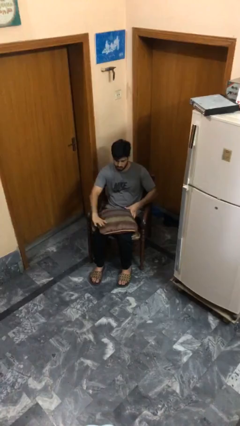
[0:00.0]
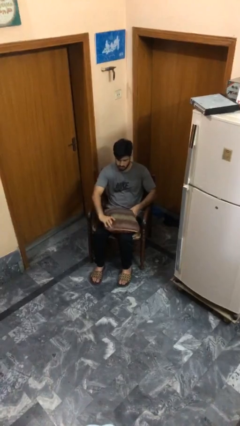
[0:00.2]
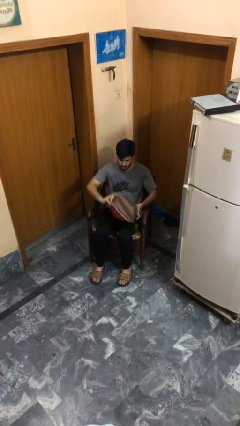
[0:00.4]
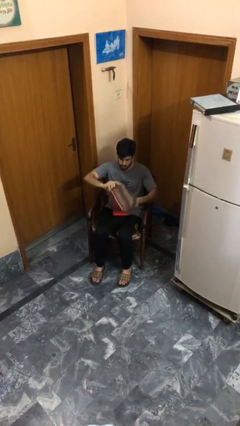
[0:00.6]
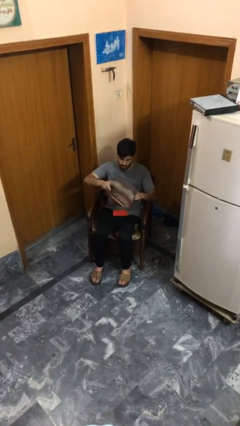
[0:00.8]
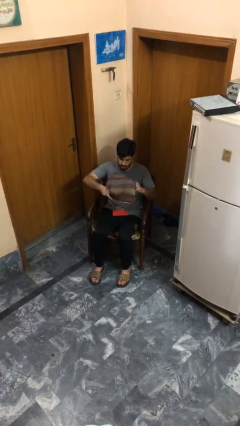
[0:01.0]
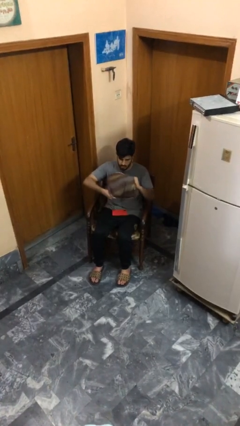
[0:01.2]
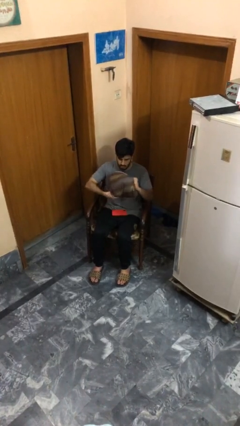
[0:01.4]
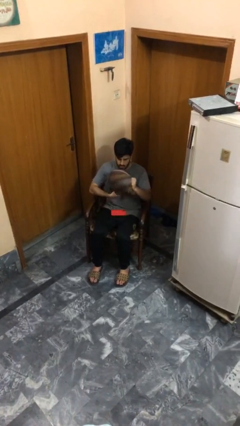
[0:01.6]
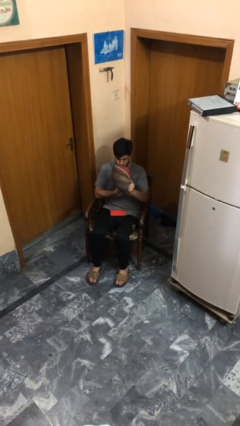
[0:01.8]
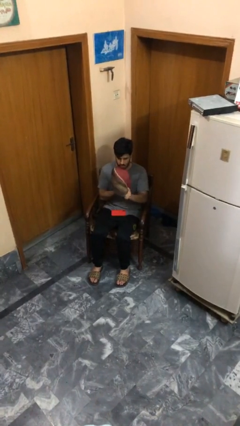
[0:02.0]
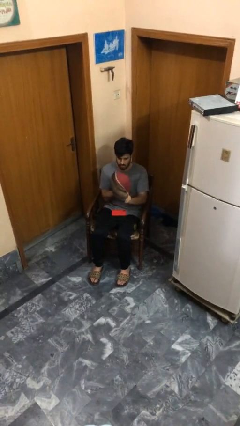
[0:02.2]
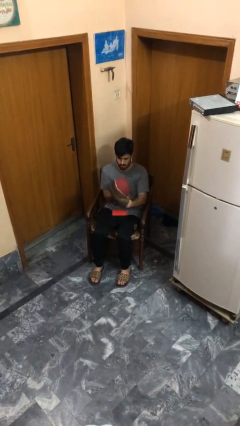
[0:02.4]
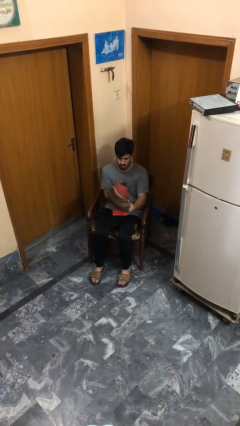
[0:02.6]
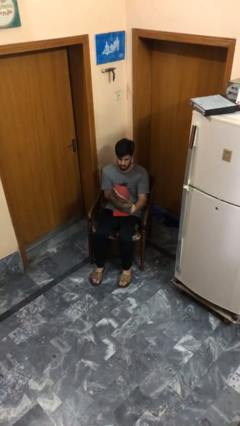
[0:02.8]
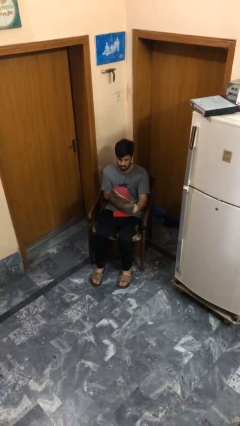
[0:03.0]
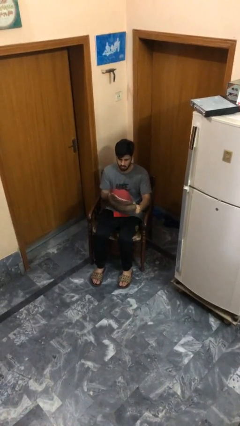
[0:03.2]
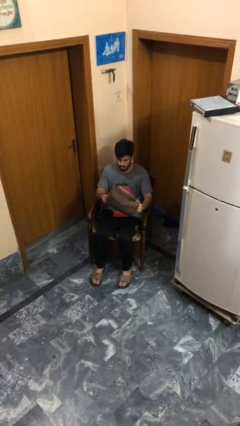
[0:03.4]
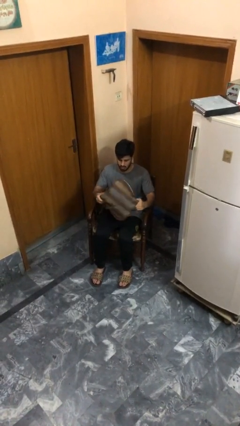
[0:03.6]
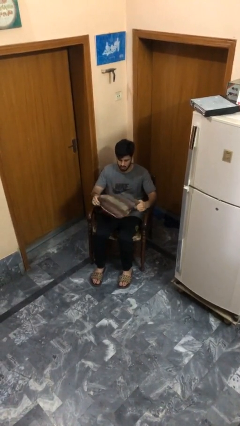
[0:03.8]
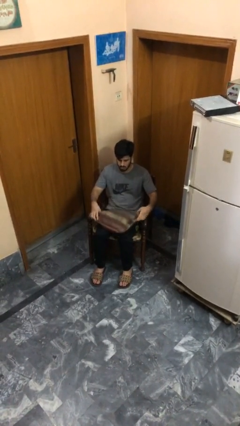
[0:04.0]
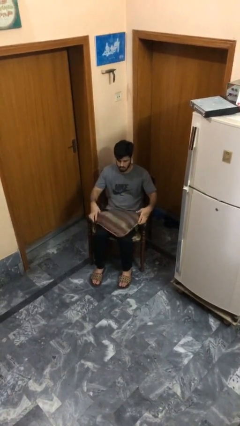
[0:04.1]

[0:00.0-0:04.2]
person squeezes object

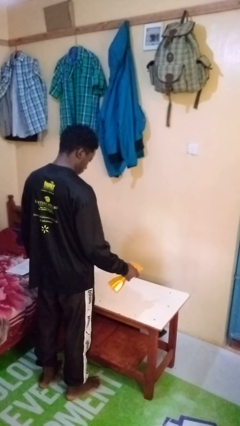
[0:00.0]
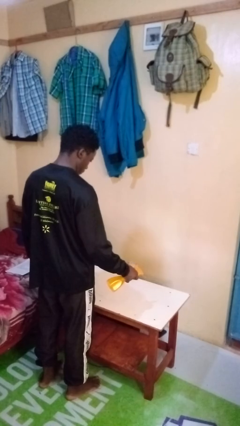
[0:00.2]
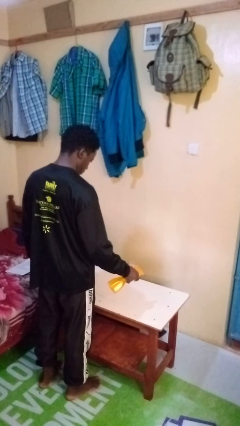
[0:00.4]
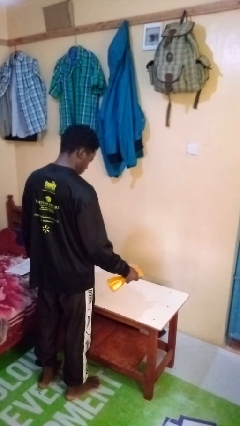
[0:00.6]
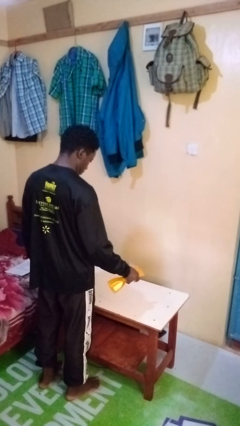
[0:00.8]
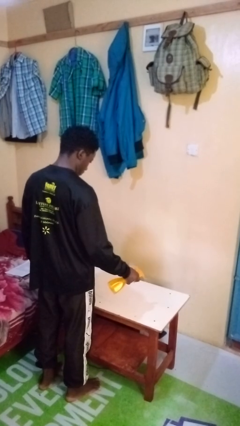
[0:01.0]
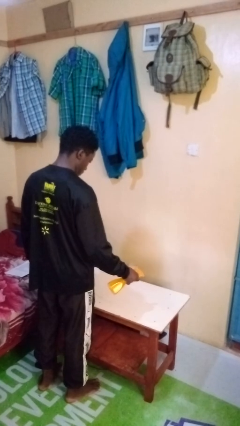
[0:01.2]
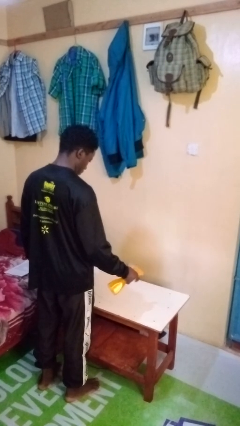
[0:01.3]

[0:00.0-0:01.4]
person sprays from bottle

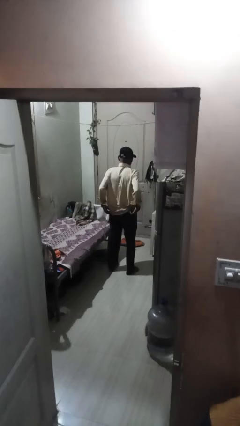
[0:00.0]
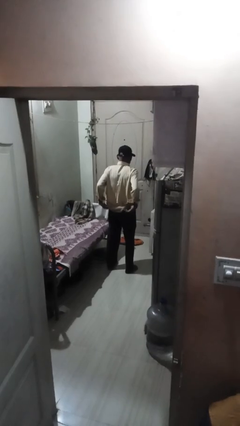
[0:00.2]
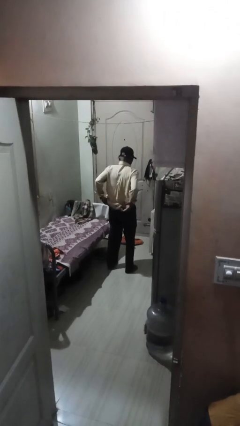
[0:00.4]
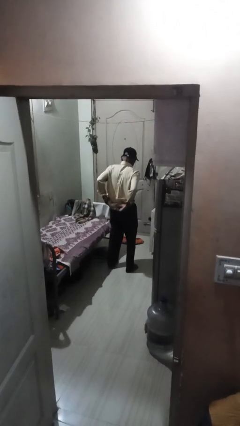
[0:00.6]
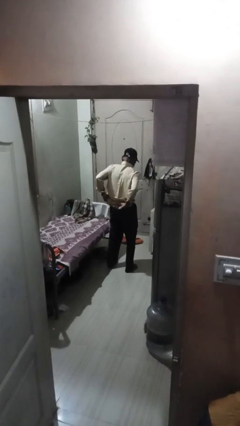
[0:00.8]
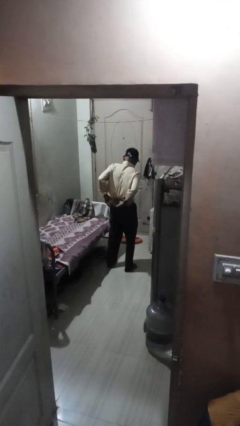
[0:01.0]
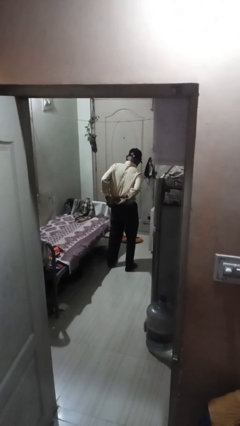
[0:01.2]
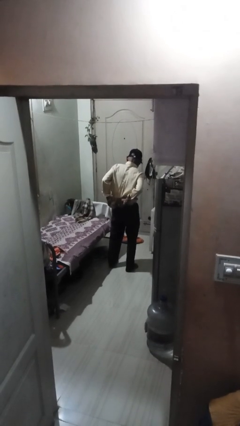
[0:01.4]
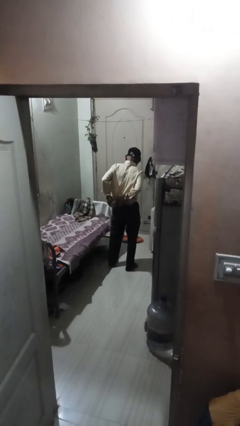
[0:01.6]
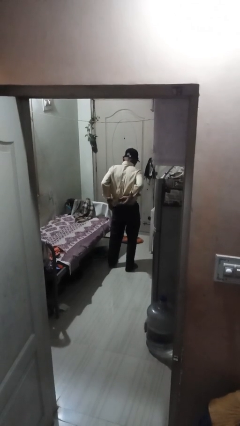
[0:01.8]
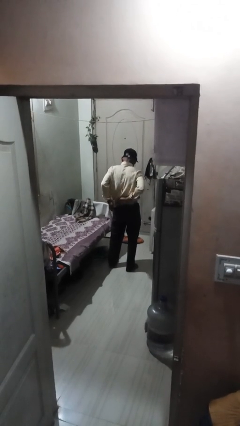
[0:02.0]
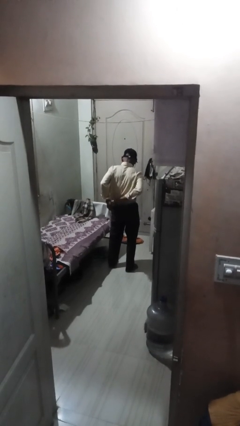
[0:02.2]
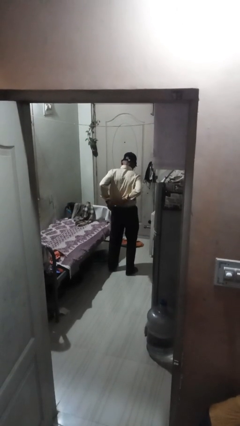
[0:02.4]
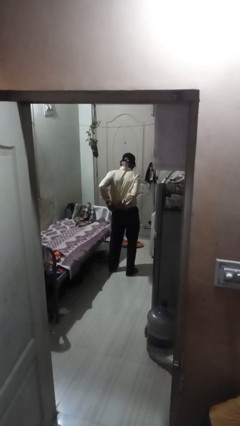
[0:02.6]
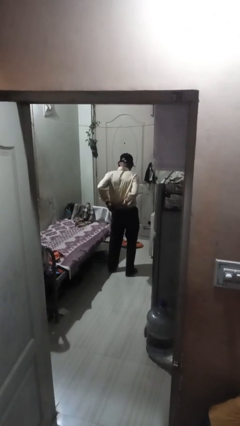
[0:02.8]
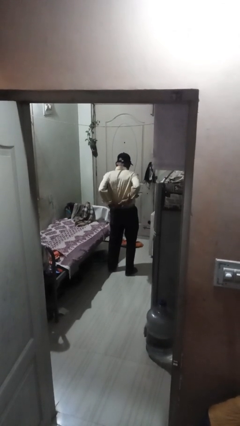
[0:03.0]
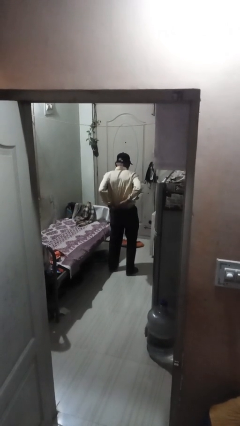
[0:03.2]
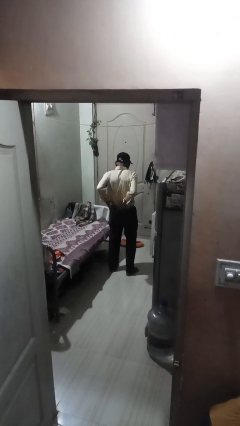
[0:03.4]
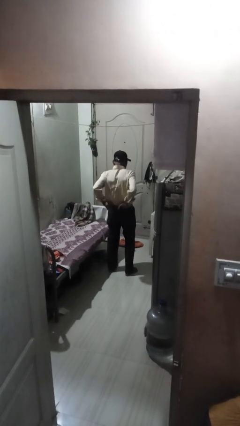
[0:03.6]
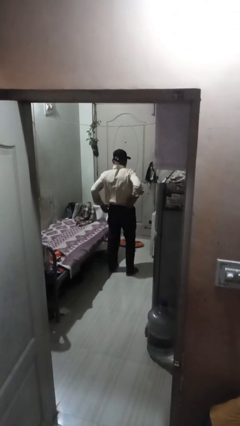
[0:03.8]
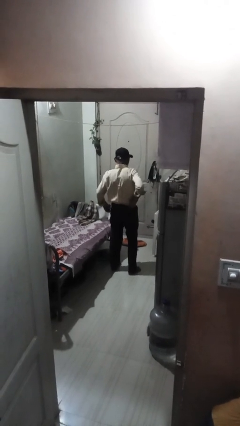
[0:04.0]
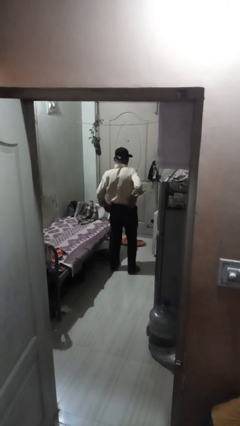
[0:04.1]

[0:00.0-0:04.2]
person tucks in shirt

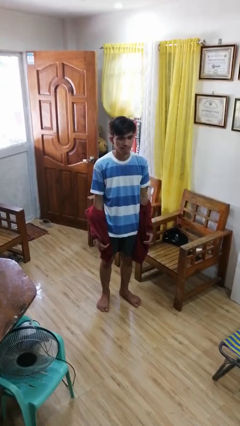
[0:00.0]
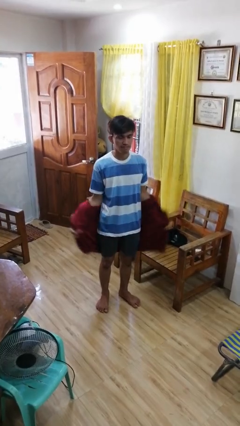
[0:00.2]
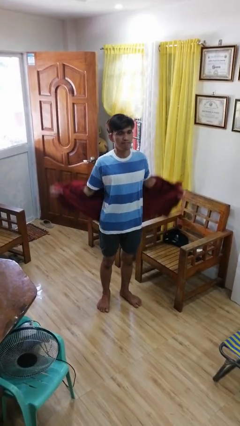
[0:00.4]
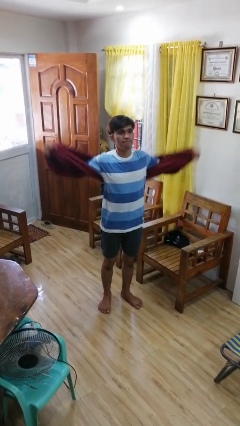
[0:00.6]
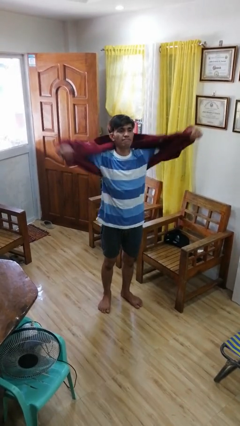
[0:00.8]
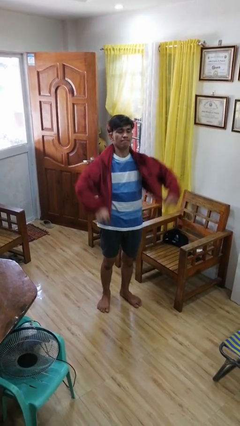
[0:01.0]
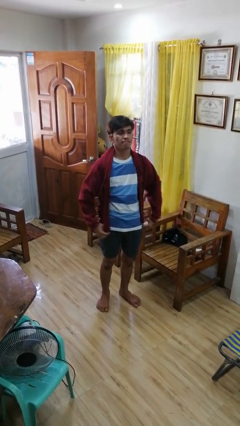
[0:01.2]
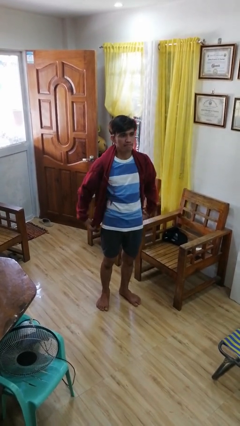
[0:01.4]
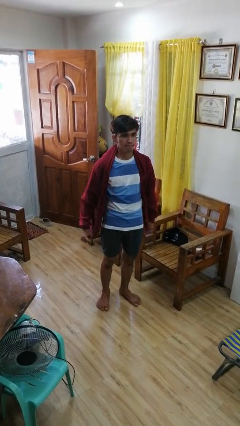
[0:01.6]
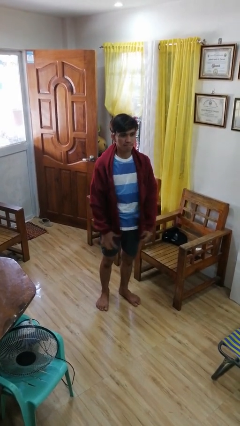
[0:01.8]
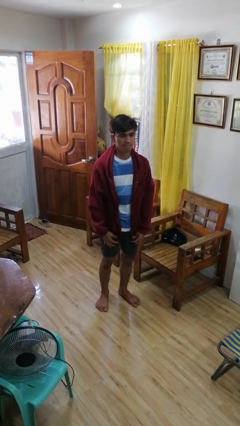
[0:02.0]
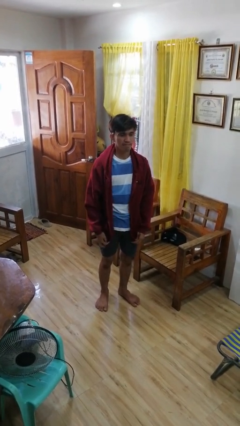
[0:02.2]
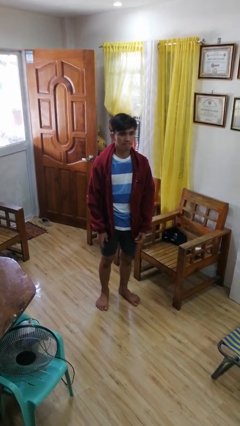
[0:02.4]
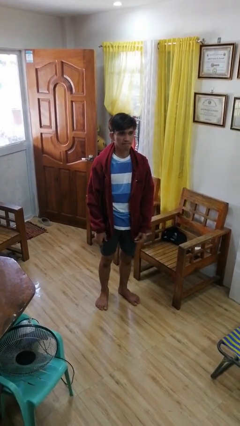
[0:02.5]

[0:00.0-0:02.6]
person puts on jacket

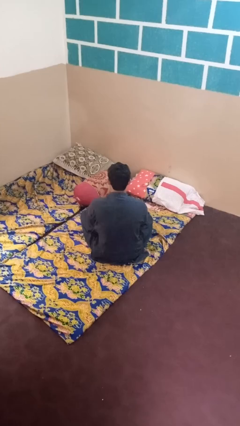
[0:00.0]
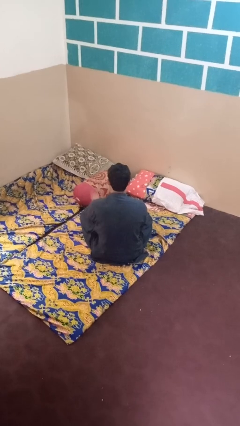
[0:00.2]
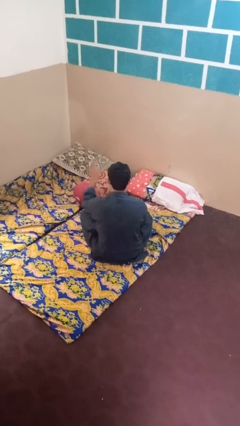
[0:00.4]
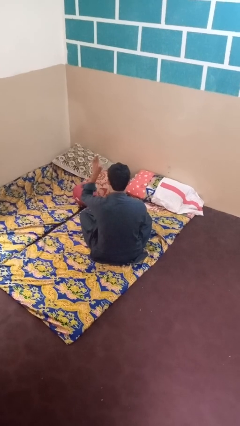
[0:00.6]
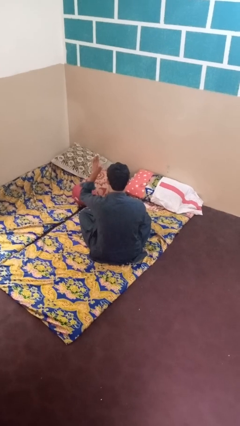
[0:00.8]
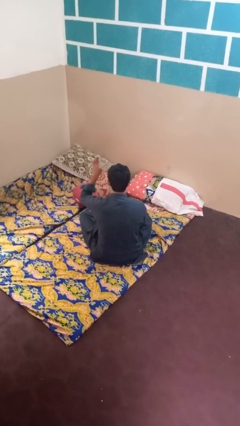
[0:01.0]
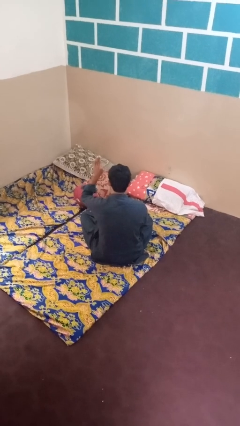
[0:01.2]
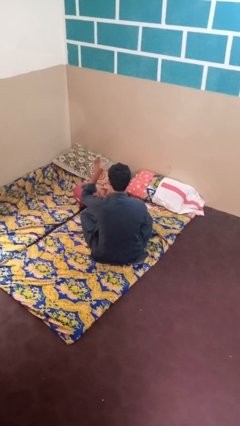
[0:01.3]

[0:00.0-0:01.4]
person gestures number three

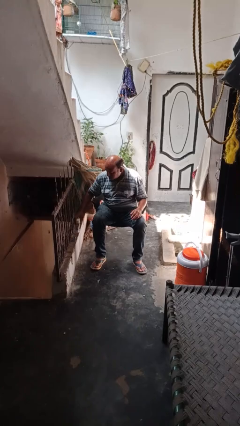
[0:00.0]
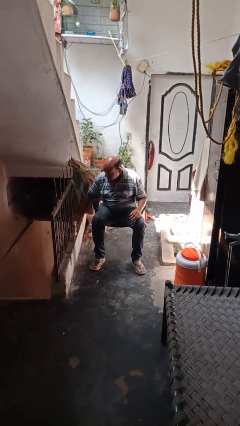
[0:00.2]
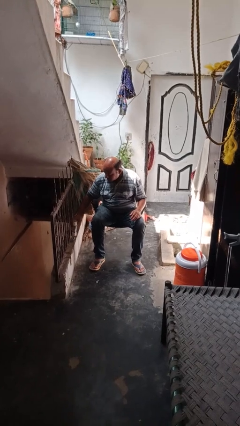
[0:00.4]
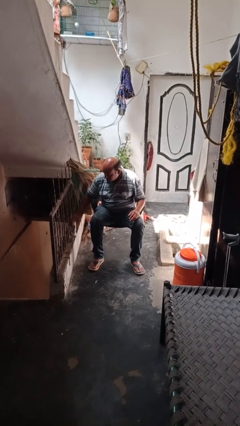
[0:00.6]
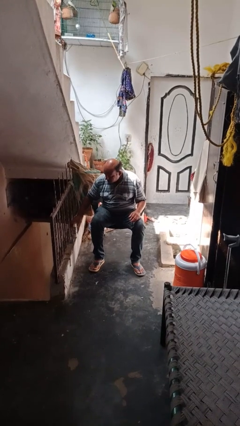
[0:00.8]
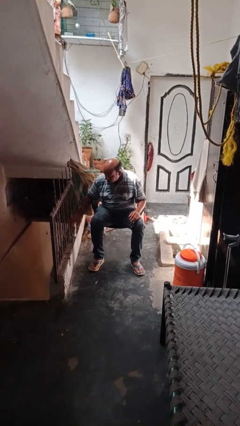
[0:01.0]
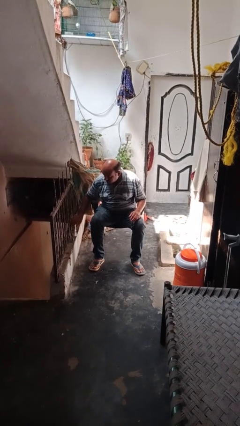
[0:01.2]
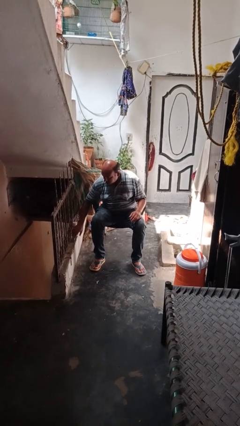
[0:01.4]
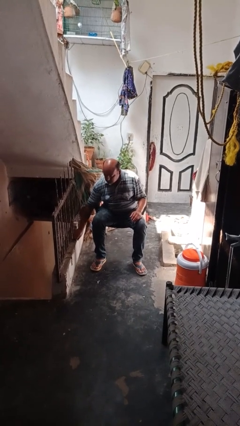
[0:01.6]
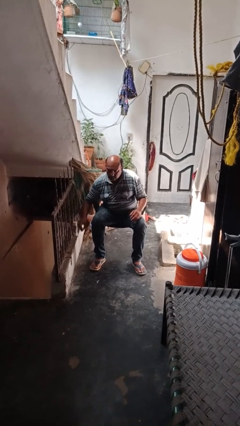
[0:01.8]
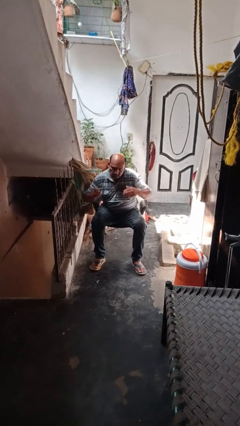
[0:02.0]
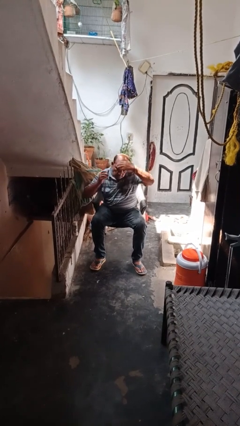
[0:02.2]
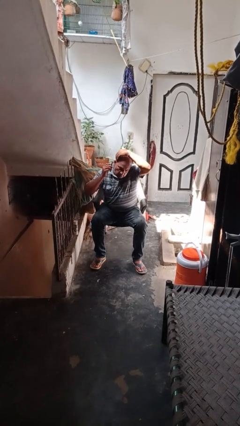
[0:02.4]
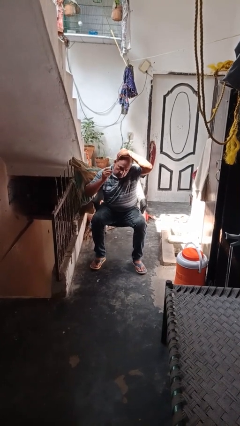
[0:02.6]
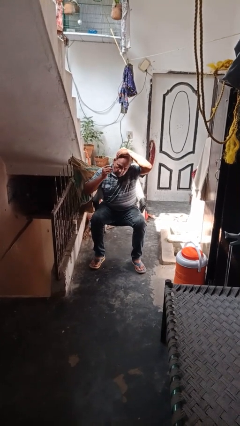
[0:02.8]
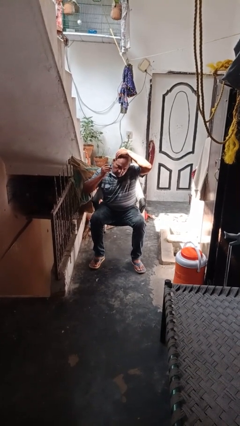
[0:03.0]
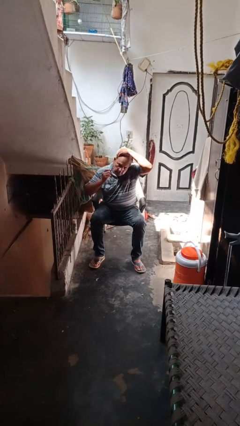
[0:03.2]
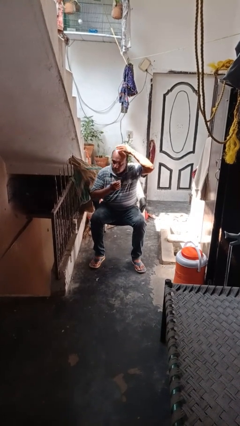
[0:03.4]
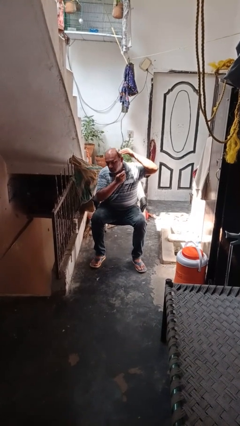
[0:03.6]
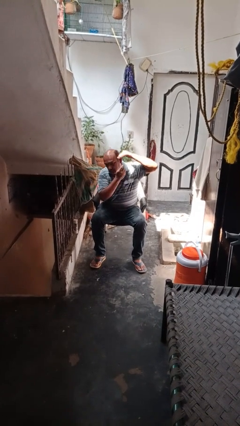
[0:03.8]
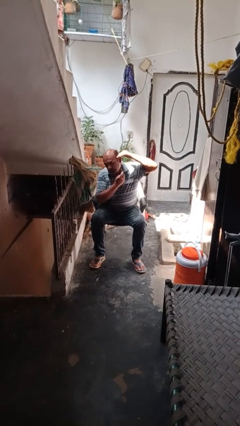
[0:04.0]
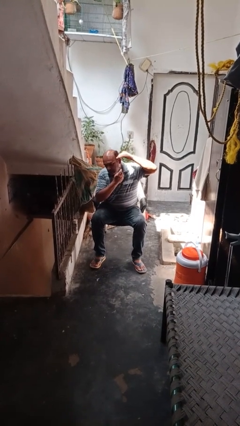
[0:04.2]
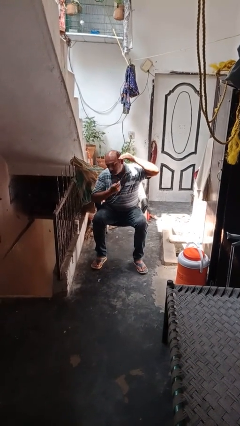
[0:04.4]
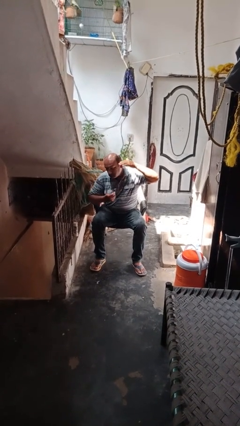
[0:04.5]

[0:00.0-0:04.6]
person shaves face
